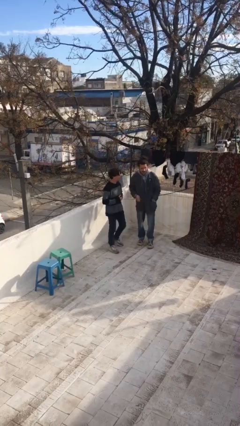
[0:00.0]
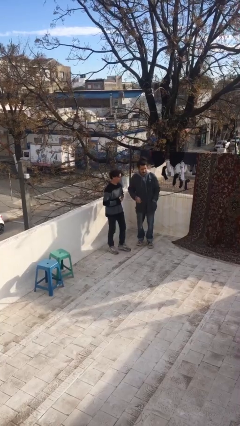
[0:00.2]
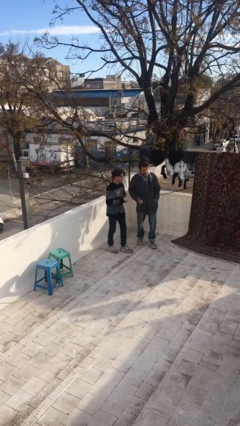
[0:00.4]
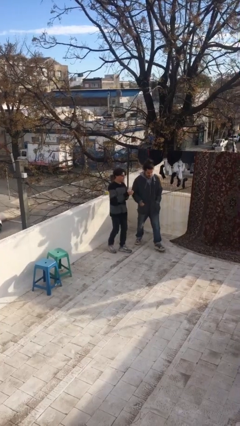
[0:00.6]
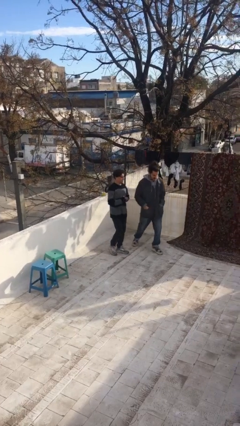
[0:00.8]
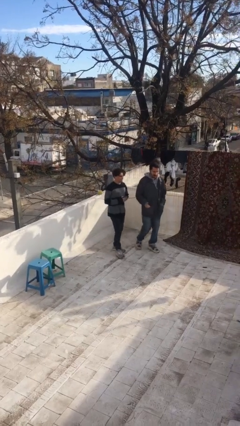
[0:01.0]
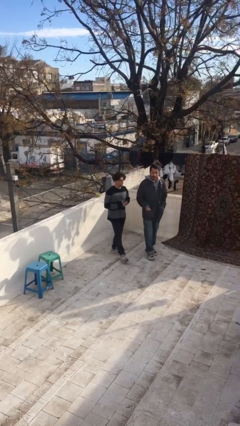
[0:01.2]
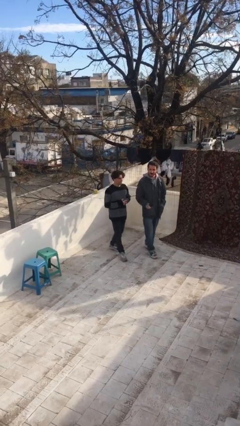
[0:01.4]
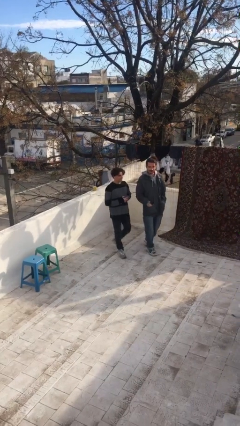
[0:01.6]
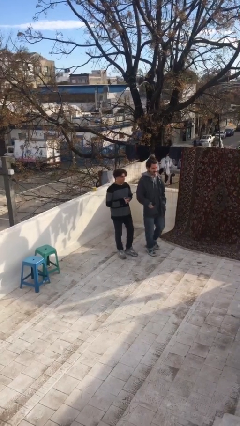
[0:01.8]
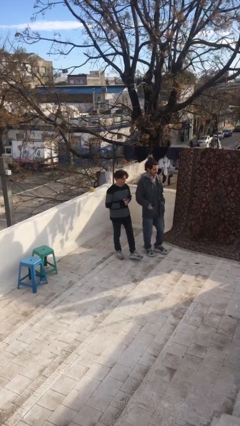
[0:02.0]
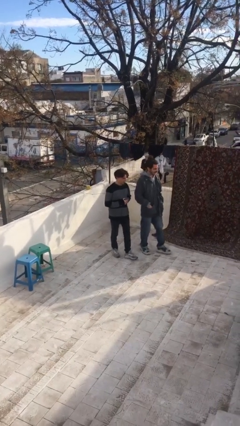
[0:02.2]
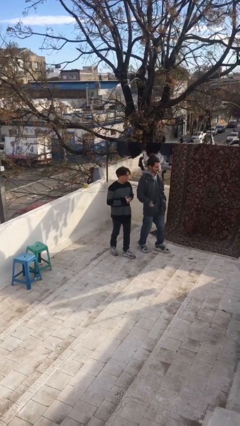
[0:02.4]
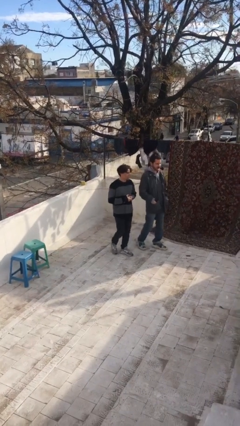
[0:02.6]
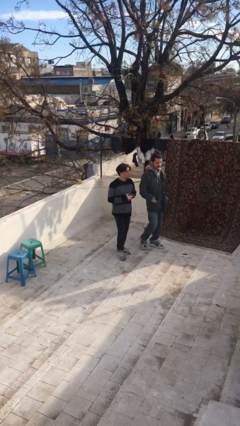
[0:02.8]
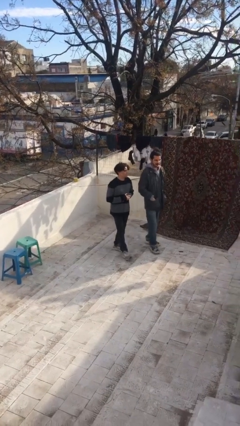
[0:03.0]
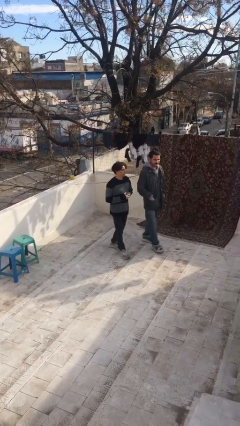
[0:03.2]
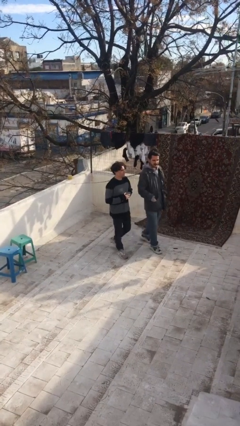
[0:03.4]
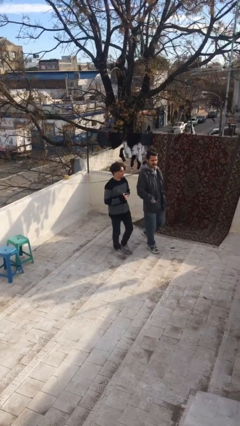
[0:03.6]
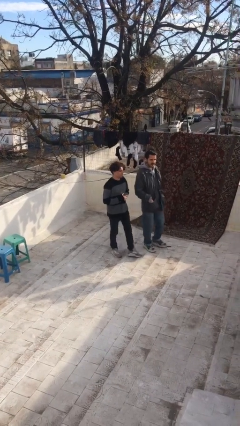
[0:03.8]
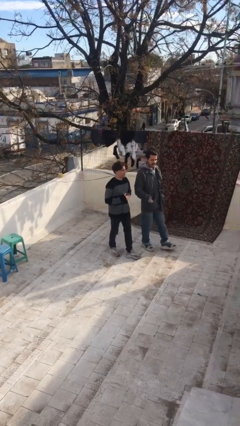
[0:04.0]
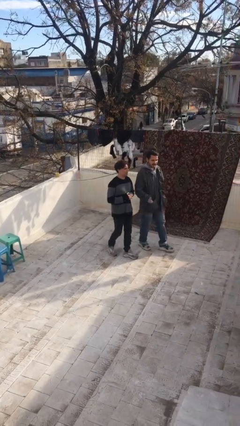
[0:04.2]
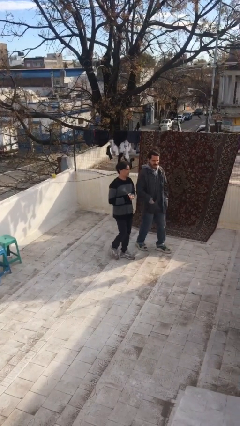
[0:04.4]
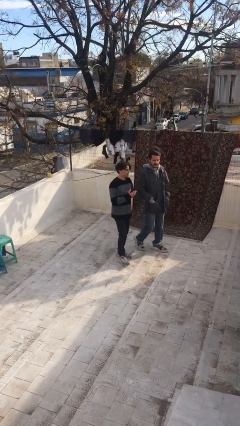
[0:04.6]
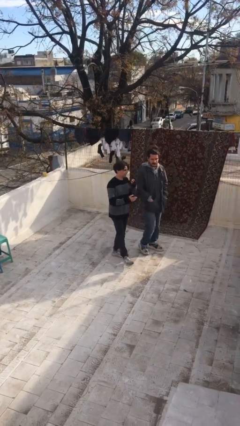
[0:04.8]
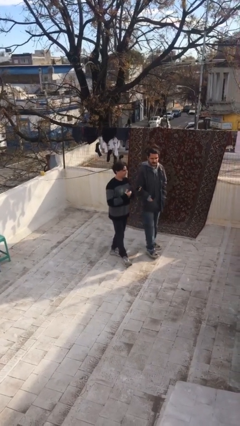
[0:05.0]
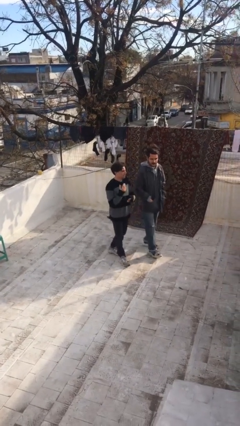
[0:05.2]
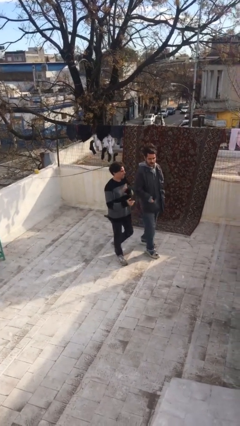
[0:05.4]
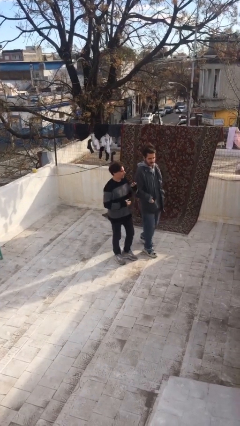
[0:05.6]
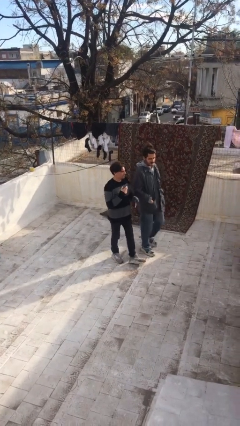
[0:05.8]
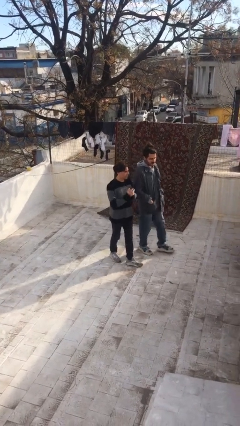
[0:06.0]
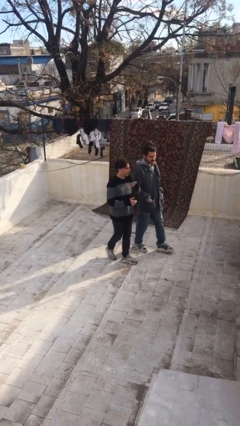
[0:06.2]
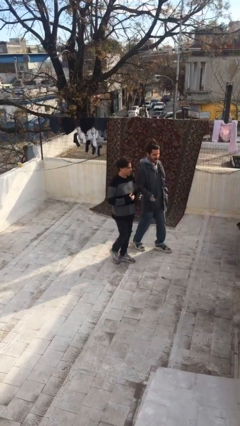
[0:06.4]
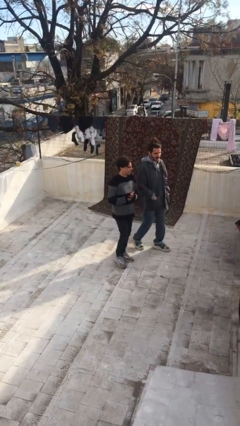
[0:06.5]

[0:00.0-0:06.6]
person talks to person

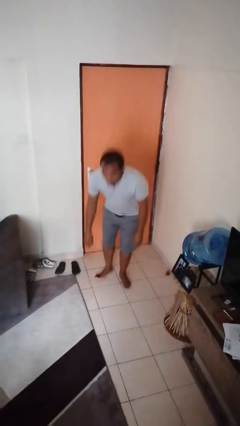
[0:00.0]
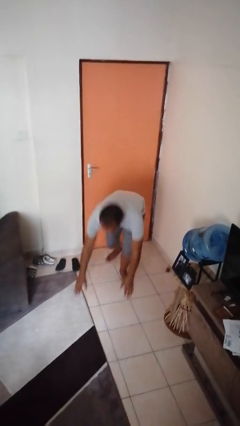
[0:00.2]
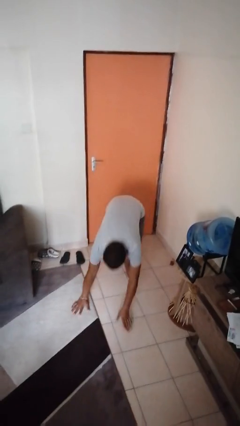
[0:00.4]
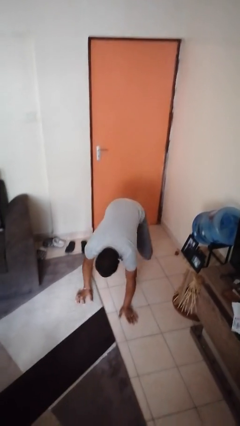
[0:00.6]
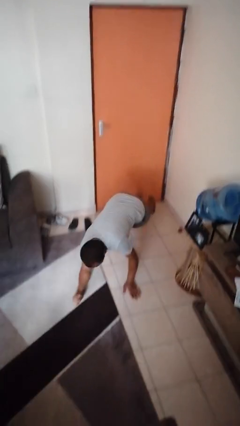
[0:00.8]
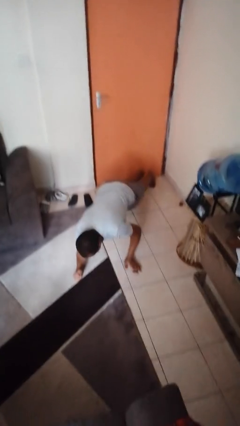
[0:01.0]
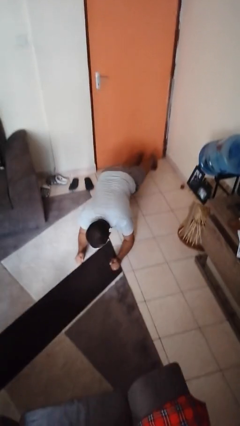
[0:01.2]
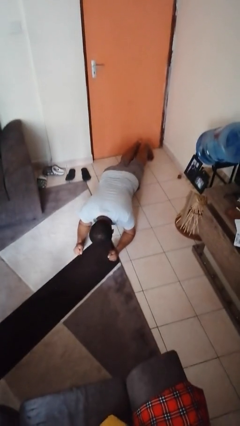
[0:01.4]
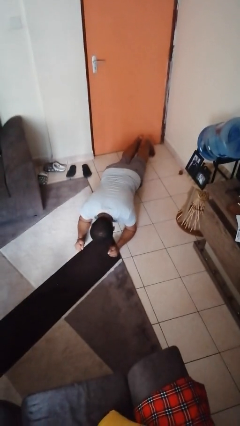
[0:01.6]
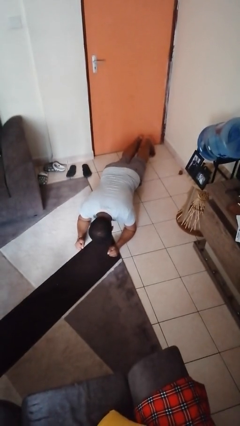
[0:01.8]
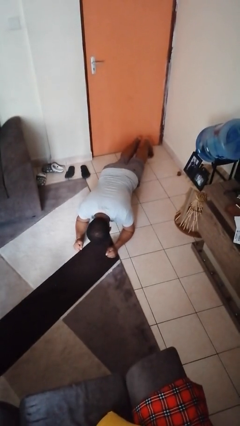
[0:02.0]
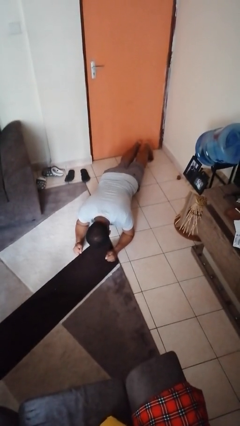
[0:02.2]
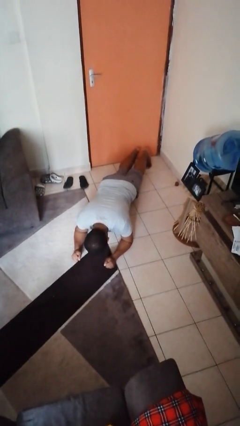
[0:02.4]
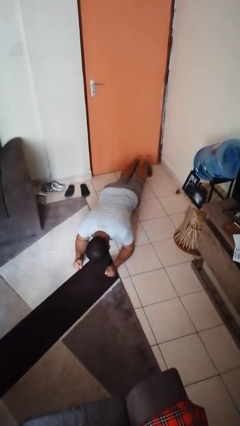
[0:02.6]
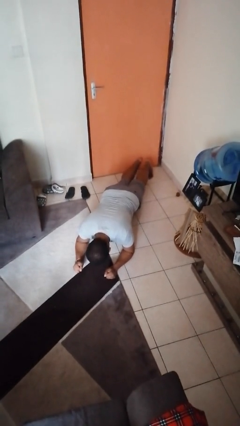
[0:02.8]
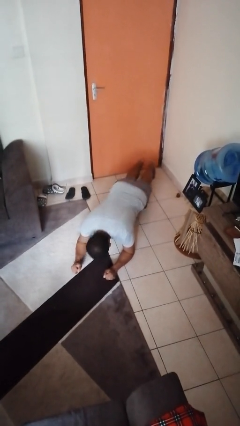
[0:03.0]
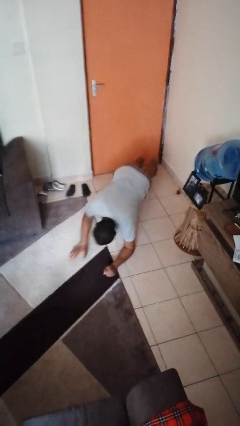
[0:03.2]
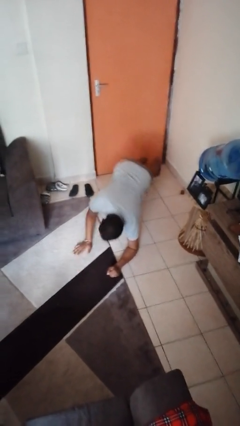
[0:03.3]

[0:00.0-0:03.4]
person exercises with plank

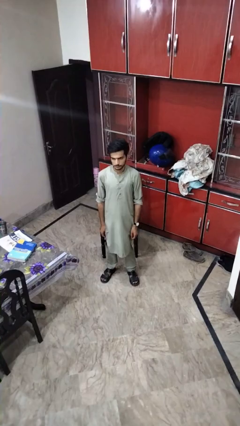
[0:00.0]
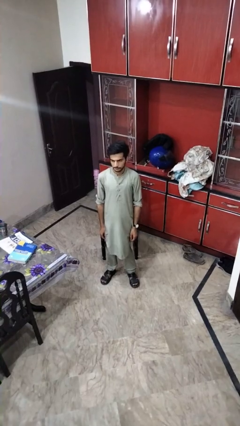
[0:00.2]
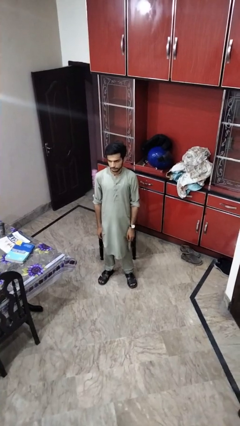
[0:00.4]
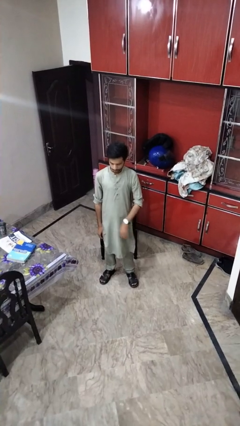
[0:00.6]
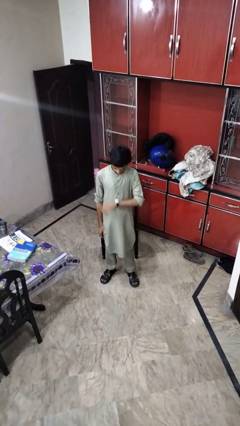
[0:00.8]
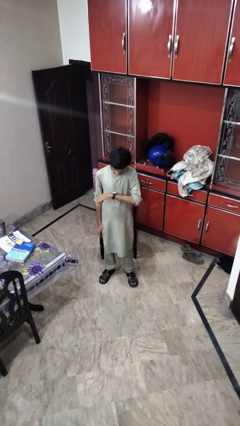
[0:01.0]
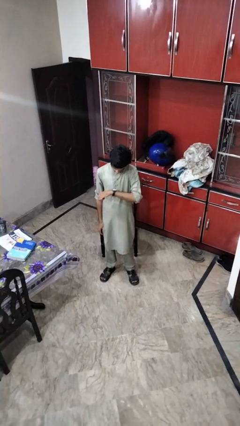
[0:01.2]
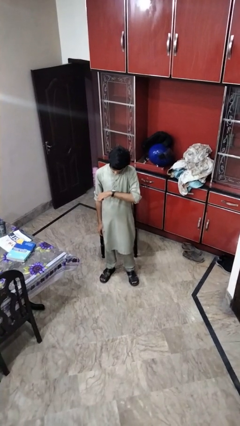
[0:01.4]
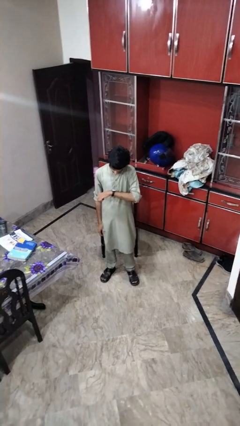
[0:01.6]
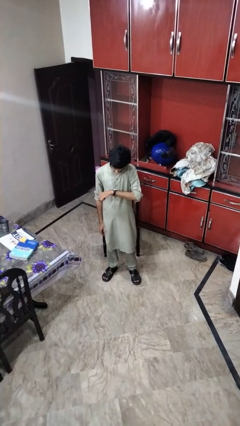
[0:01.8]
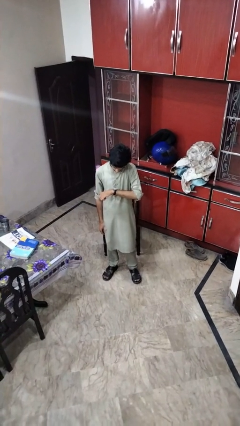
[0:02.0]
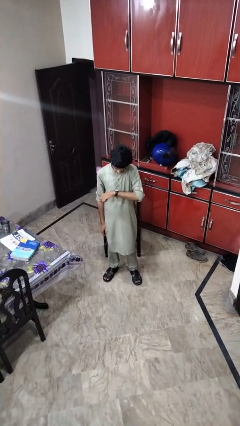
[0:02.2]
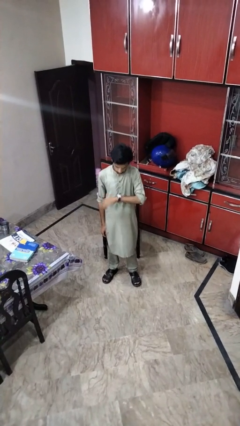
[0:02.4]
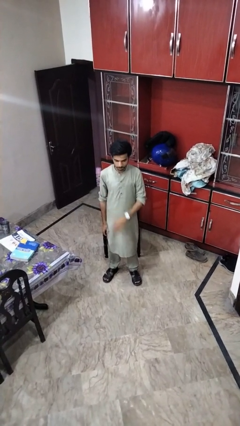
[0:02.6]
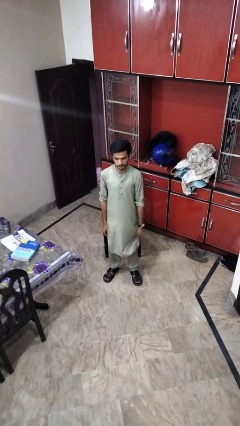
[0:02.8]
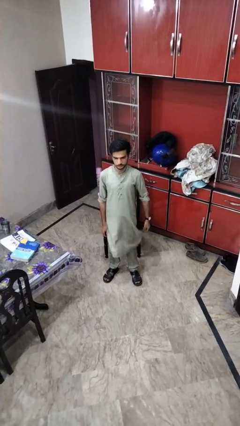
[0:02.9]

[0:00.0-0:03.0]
person looks at wristwatch

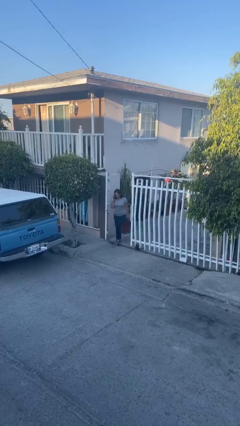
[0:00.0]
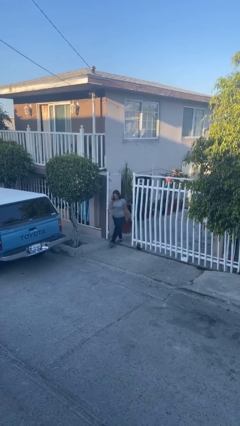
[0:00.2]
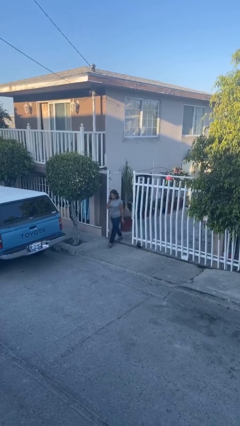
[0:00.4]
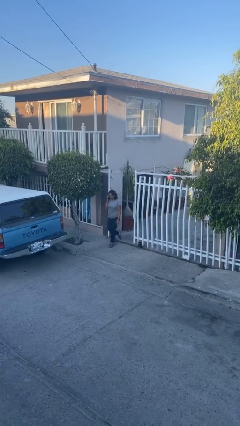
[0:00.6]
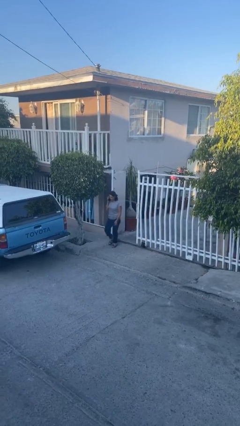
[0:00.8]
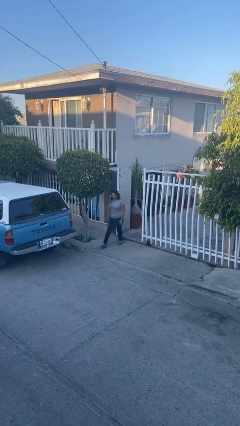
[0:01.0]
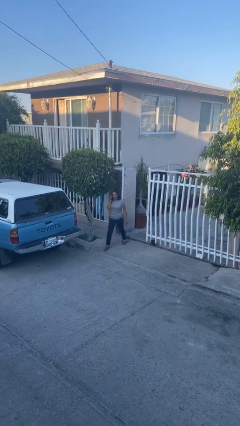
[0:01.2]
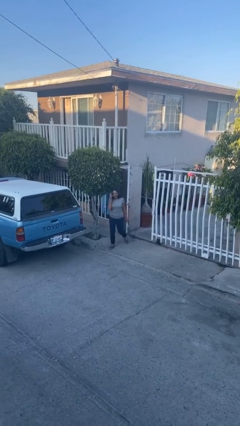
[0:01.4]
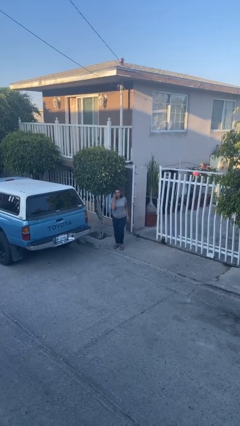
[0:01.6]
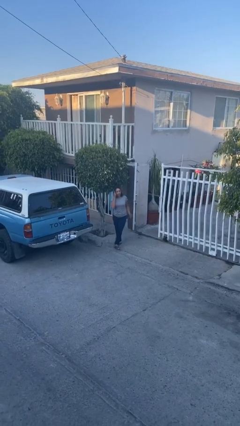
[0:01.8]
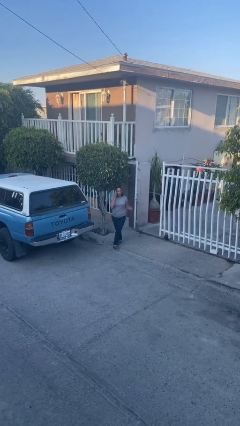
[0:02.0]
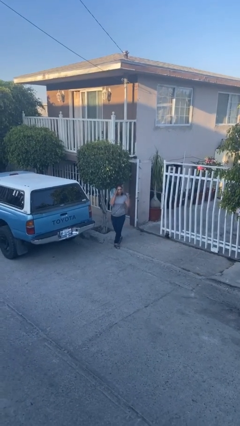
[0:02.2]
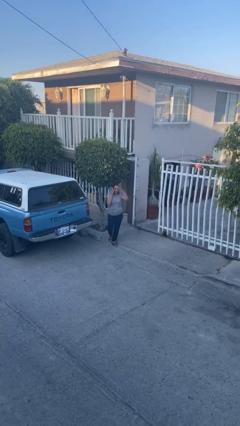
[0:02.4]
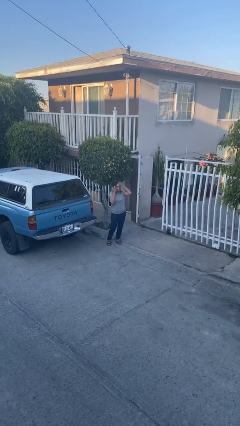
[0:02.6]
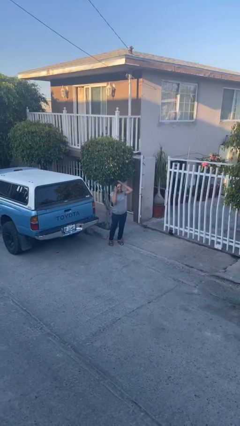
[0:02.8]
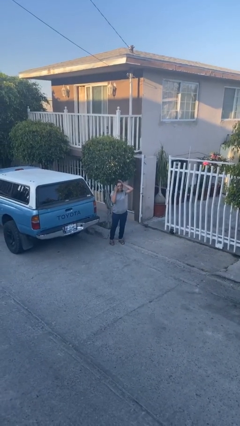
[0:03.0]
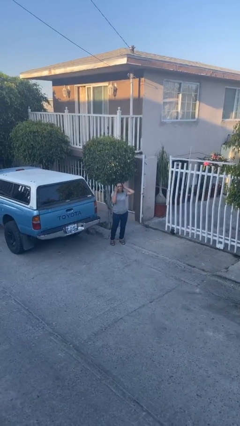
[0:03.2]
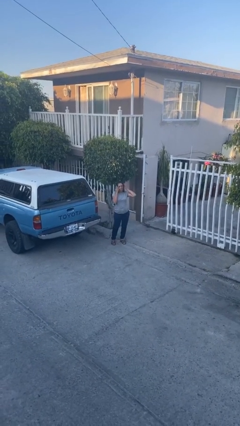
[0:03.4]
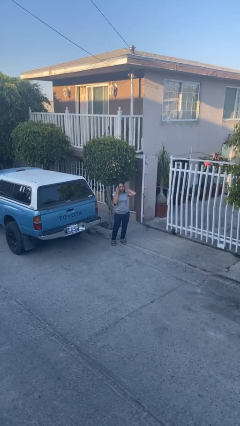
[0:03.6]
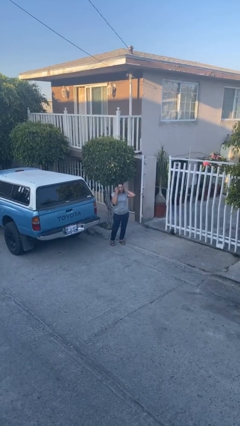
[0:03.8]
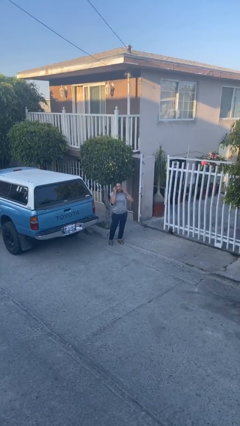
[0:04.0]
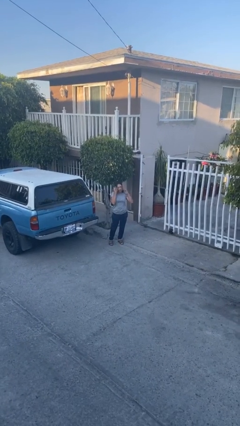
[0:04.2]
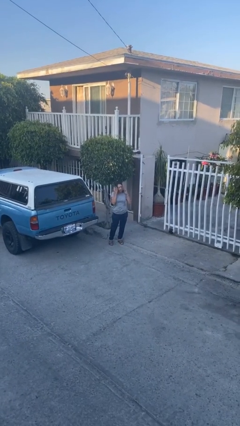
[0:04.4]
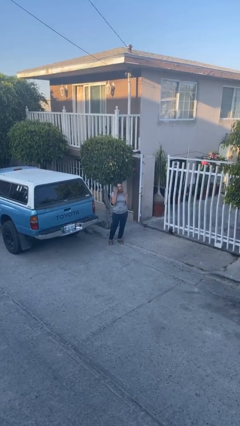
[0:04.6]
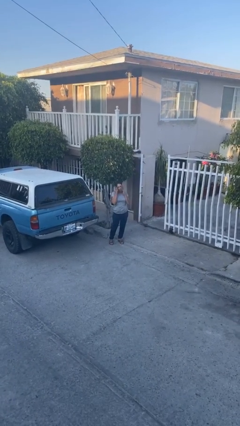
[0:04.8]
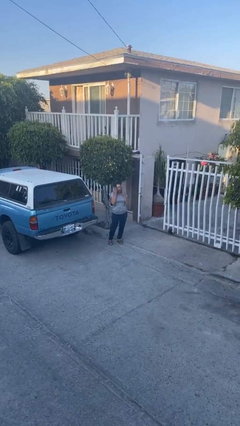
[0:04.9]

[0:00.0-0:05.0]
person enters scene through structure
